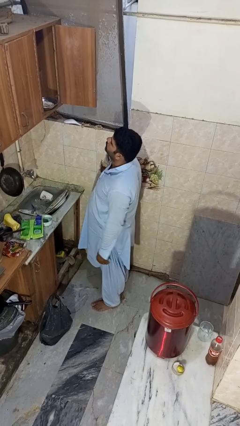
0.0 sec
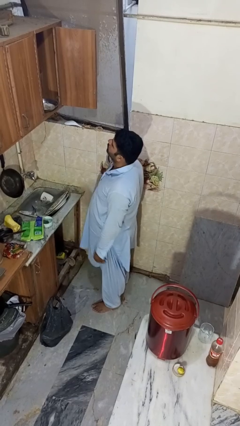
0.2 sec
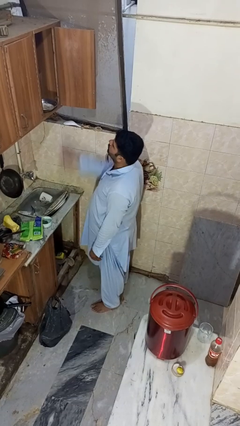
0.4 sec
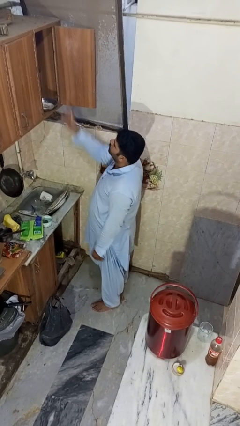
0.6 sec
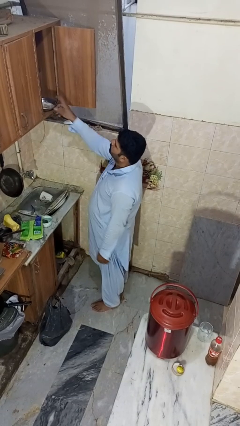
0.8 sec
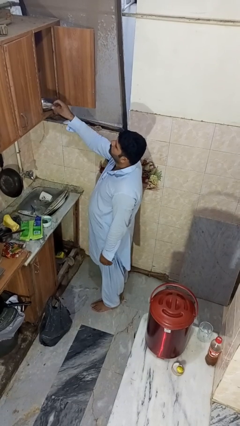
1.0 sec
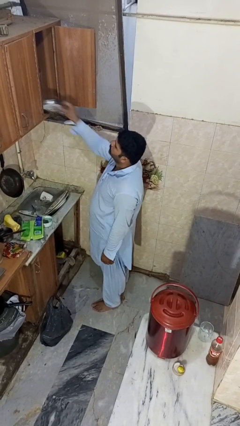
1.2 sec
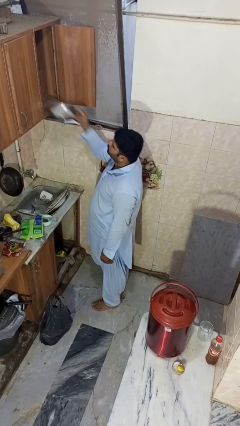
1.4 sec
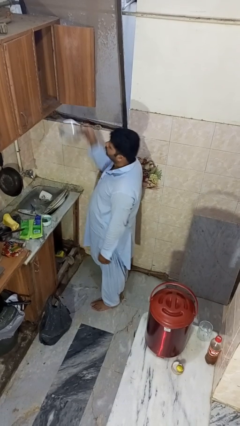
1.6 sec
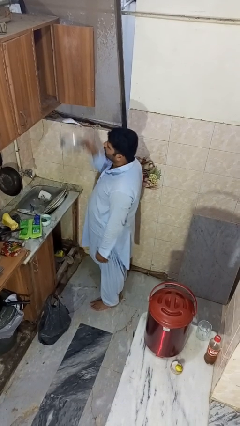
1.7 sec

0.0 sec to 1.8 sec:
person takes object from cabinet

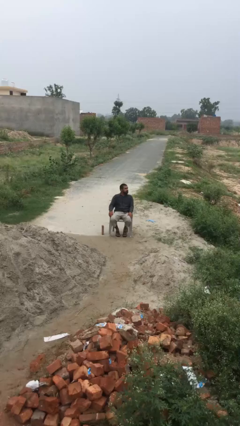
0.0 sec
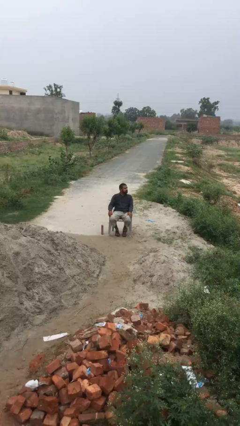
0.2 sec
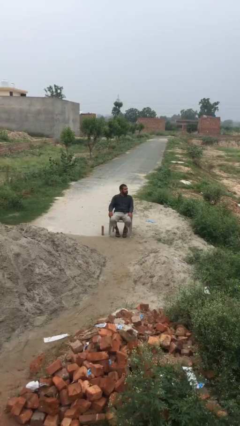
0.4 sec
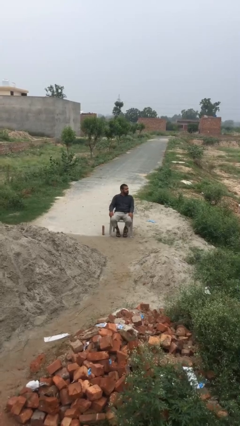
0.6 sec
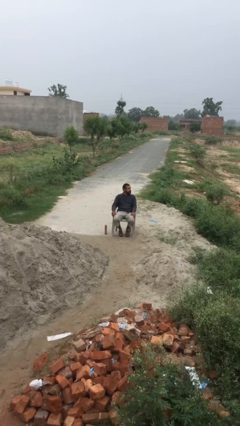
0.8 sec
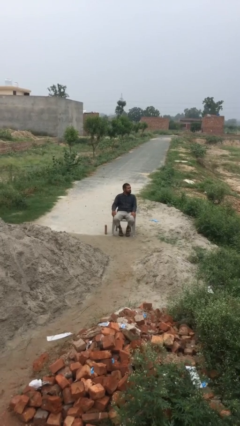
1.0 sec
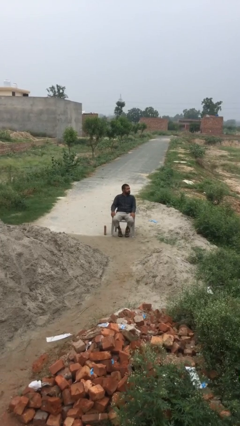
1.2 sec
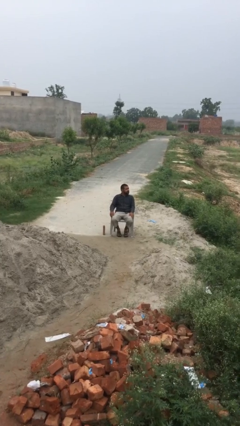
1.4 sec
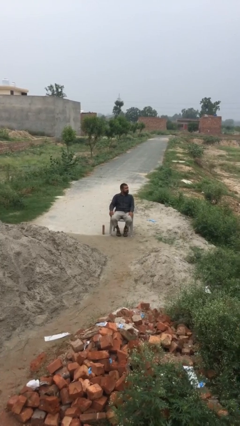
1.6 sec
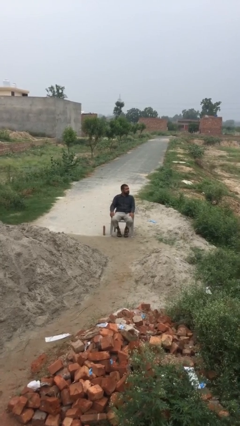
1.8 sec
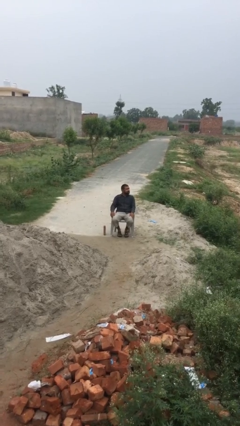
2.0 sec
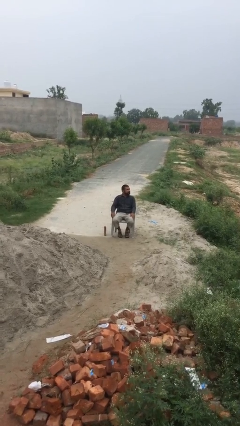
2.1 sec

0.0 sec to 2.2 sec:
person picks up object from floor

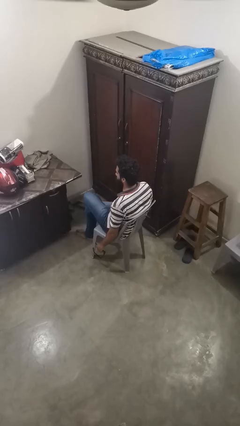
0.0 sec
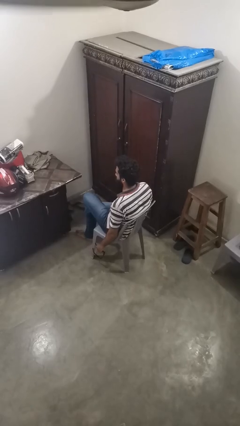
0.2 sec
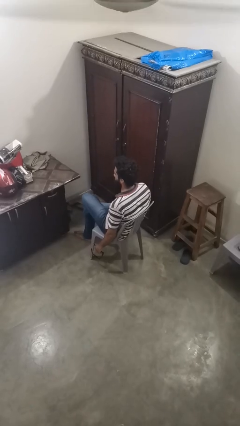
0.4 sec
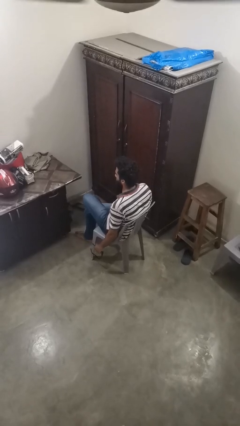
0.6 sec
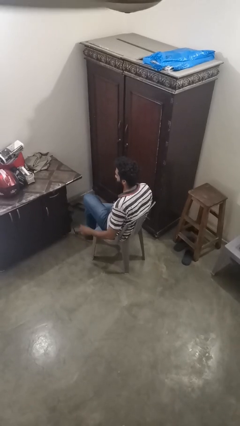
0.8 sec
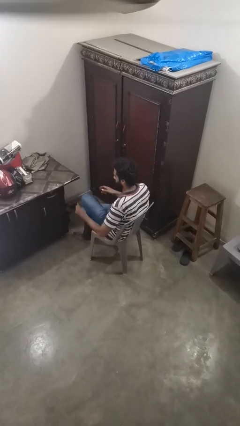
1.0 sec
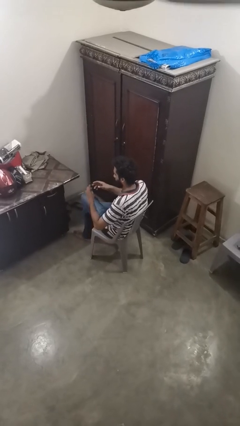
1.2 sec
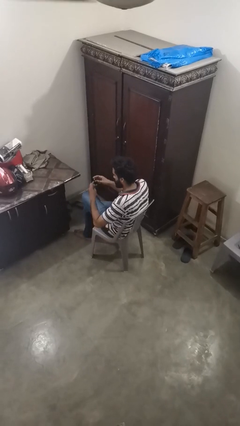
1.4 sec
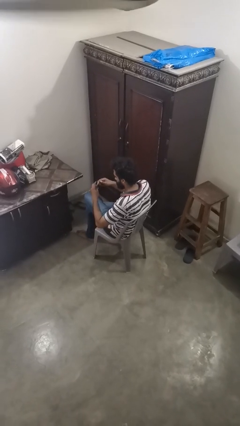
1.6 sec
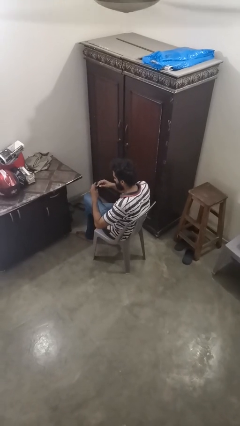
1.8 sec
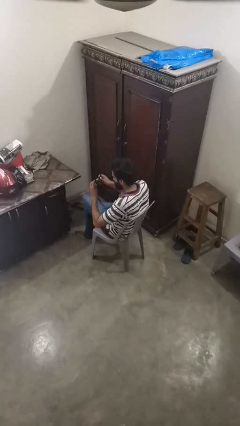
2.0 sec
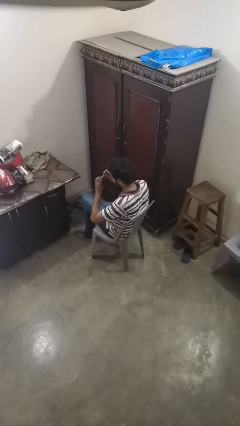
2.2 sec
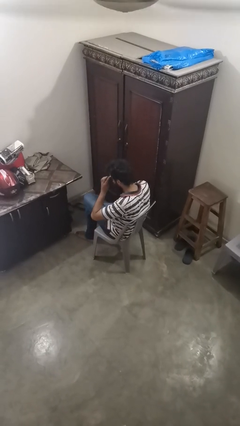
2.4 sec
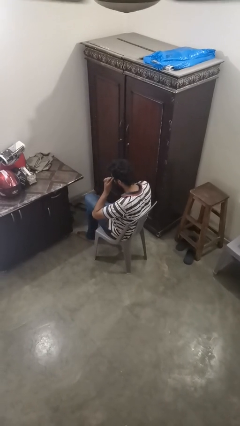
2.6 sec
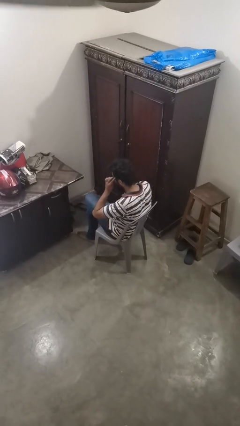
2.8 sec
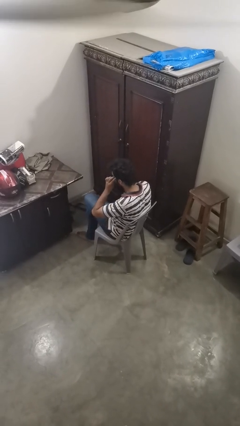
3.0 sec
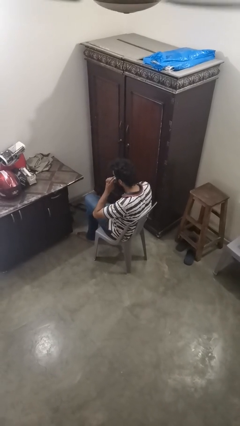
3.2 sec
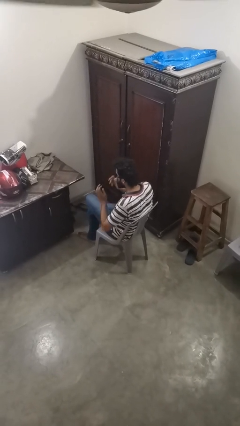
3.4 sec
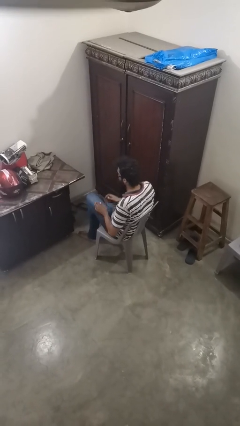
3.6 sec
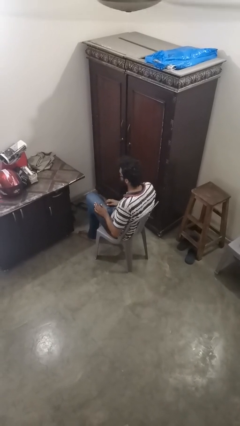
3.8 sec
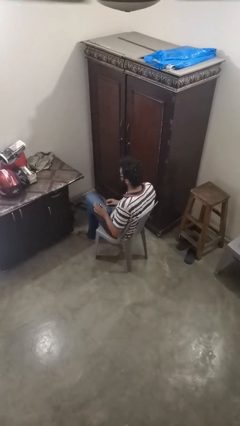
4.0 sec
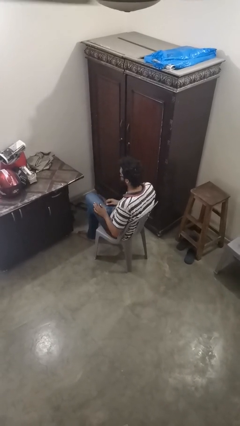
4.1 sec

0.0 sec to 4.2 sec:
person puts on sunglasses

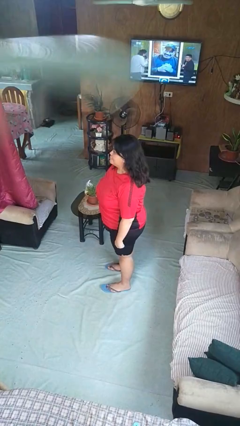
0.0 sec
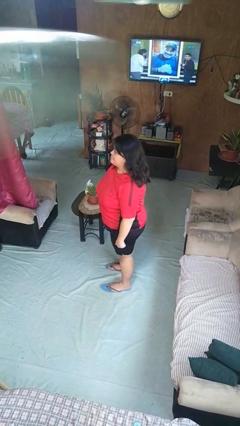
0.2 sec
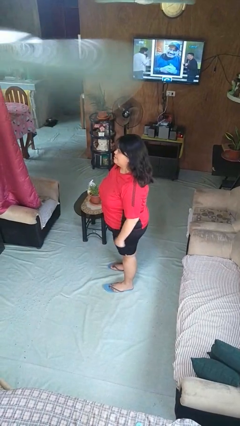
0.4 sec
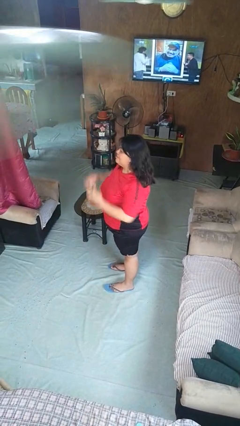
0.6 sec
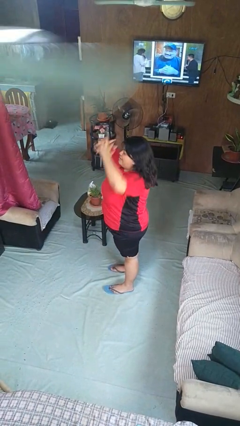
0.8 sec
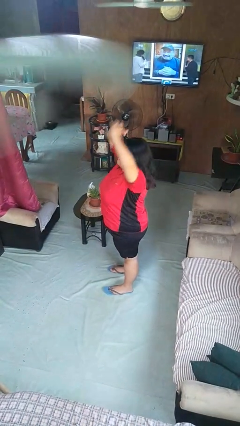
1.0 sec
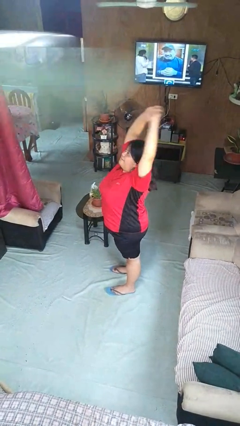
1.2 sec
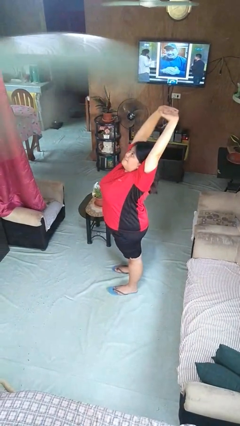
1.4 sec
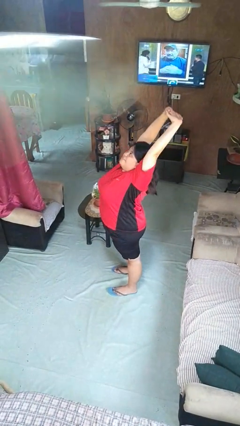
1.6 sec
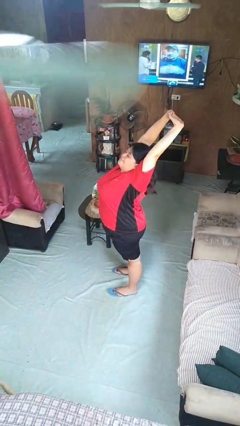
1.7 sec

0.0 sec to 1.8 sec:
person stretches arms over head

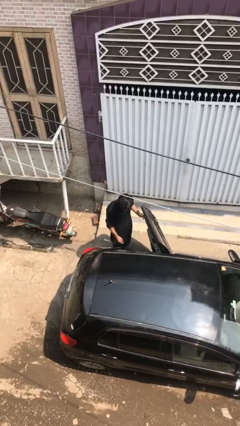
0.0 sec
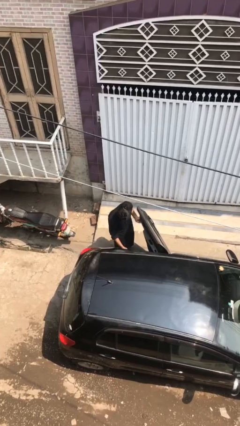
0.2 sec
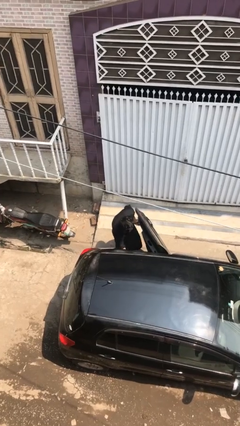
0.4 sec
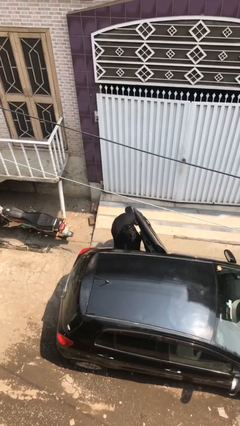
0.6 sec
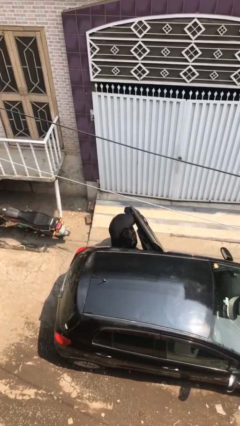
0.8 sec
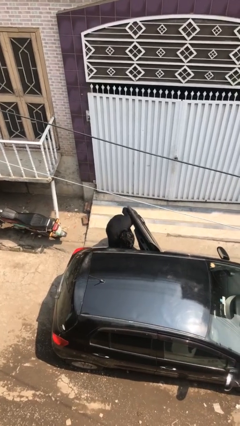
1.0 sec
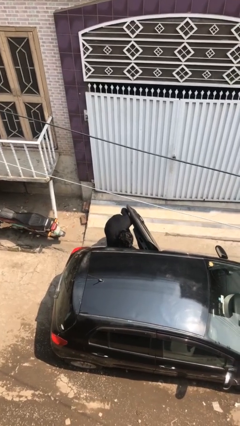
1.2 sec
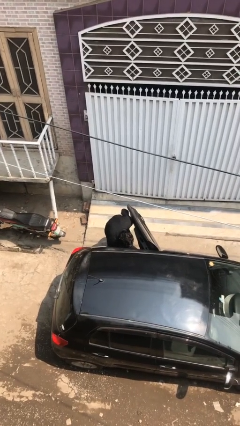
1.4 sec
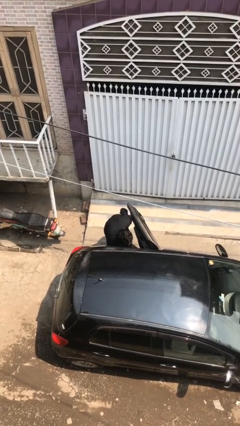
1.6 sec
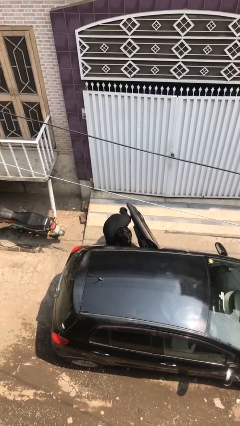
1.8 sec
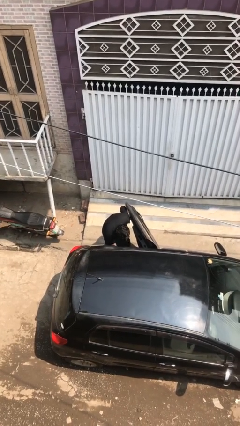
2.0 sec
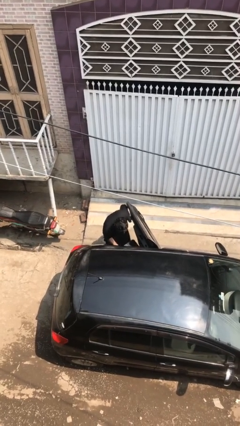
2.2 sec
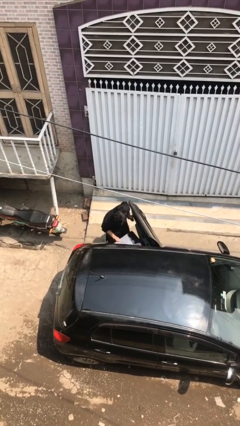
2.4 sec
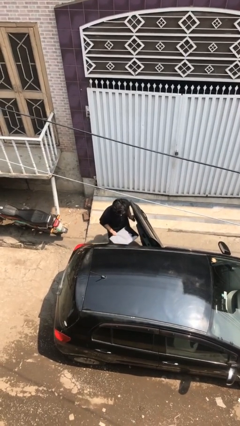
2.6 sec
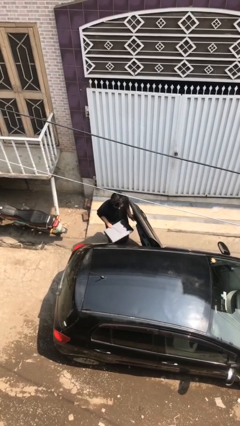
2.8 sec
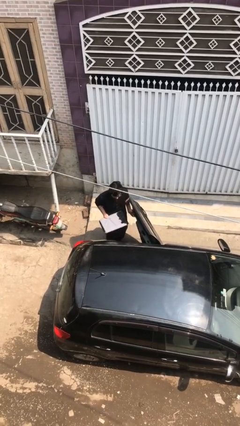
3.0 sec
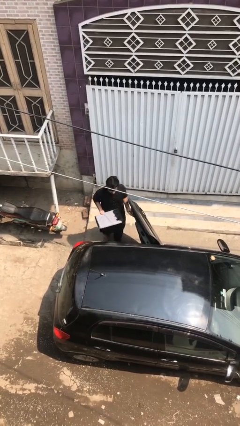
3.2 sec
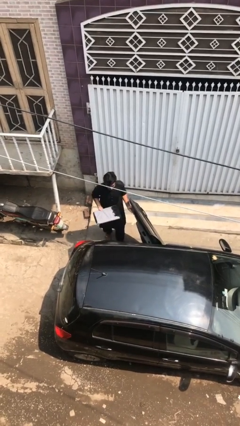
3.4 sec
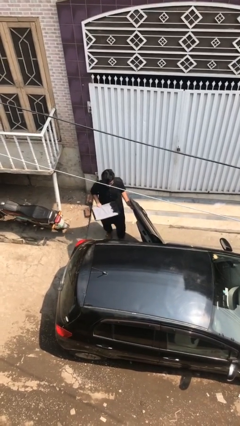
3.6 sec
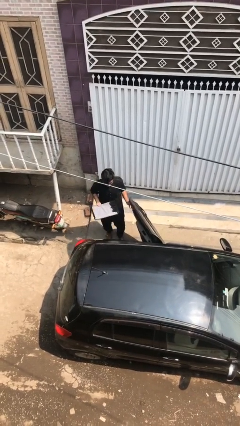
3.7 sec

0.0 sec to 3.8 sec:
person unloads car

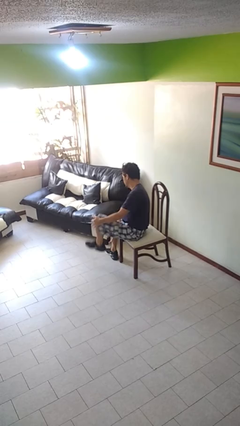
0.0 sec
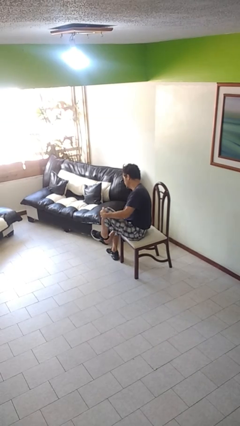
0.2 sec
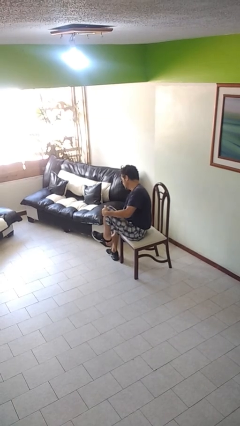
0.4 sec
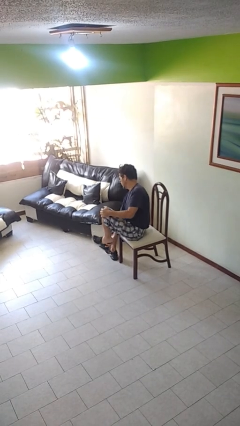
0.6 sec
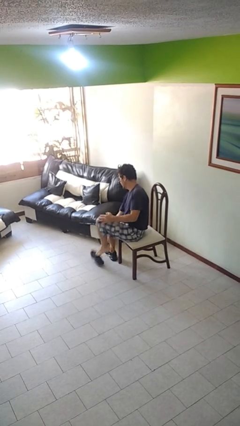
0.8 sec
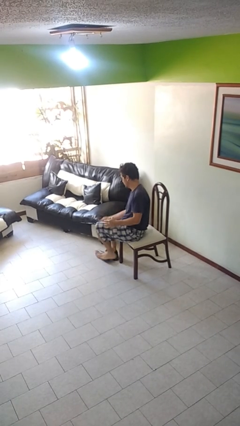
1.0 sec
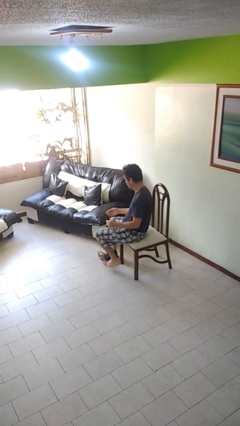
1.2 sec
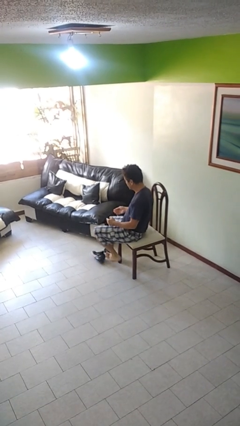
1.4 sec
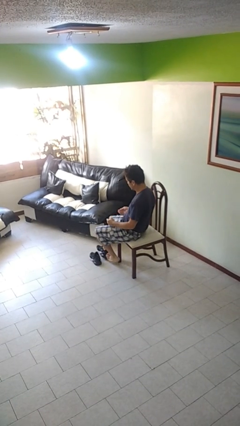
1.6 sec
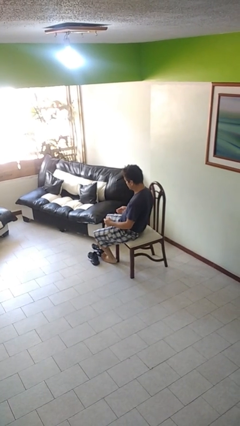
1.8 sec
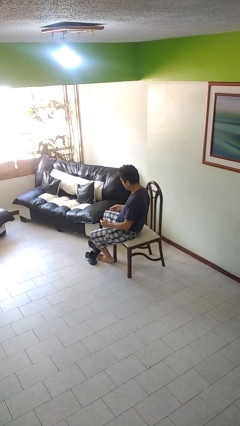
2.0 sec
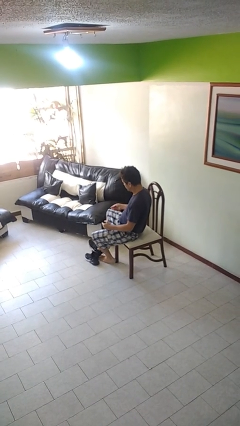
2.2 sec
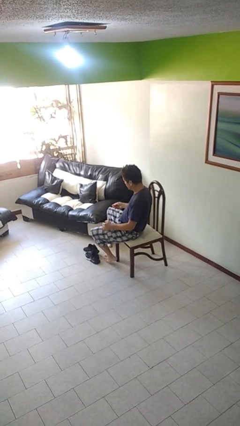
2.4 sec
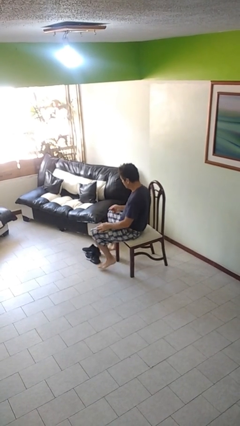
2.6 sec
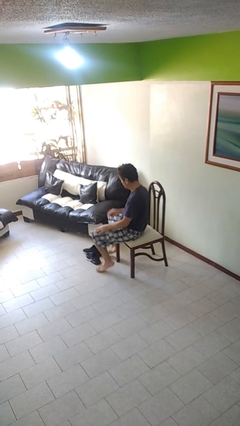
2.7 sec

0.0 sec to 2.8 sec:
person takes off shoes

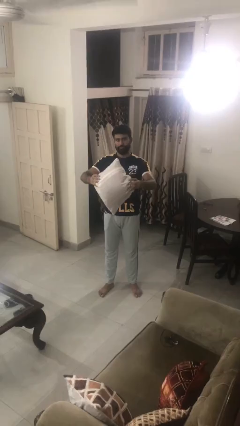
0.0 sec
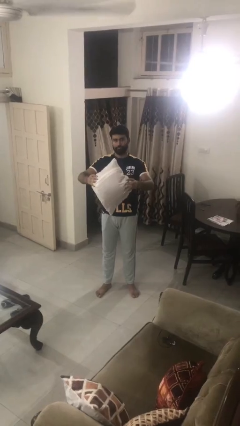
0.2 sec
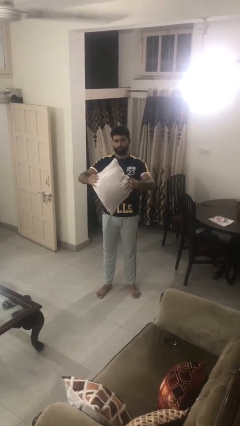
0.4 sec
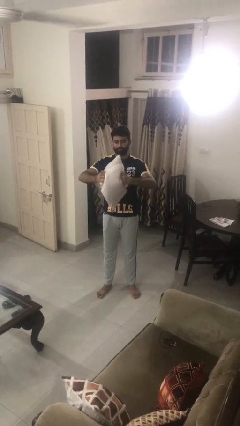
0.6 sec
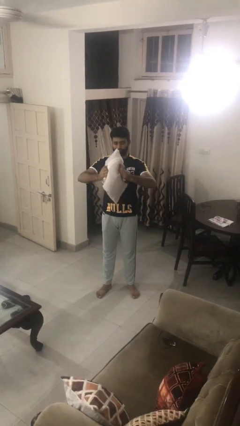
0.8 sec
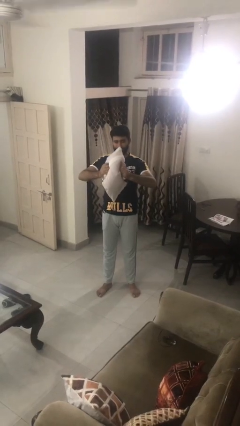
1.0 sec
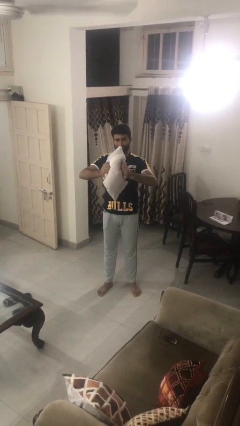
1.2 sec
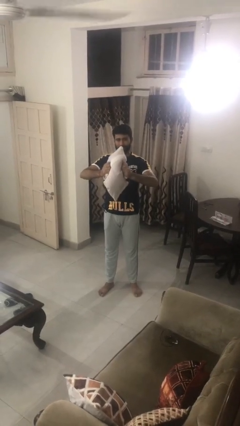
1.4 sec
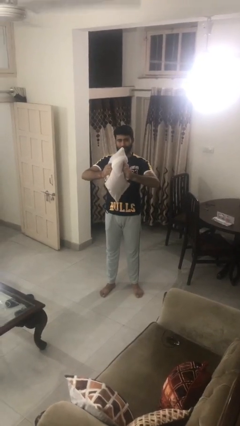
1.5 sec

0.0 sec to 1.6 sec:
person squeezes object
